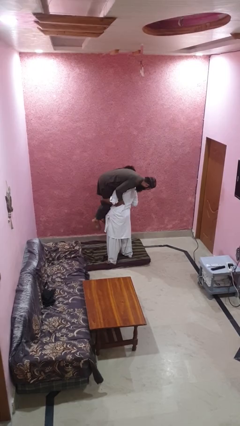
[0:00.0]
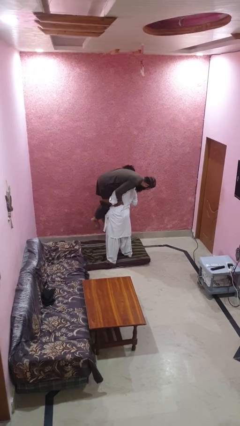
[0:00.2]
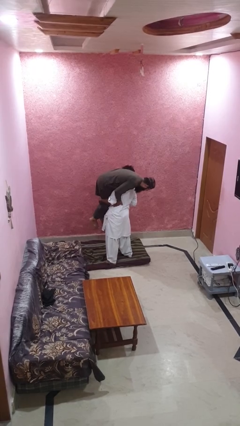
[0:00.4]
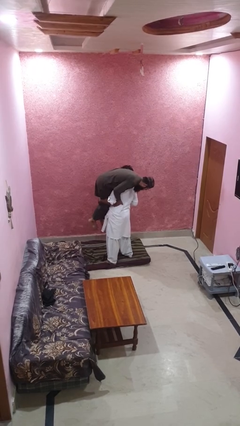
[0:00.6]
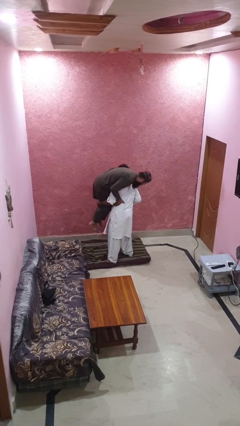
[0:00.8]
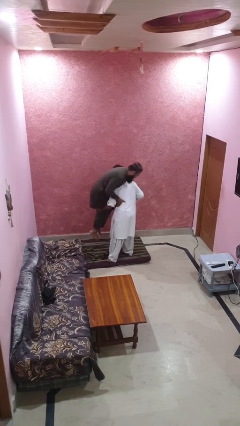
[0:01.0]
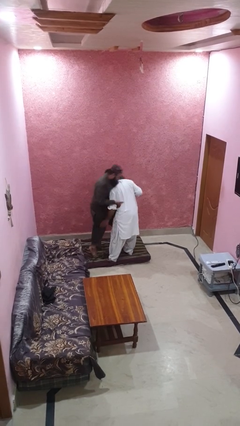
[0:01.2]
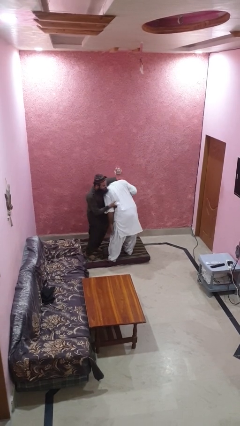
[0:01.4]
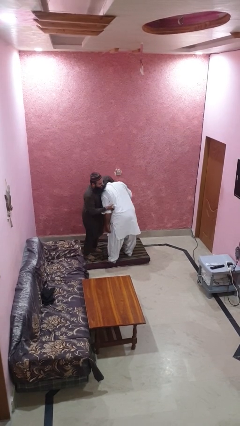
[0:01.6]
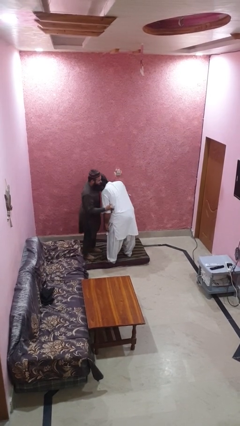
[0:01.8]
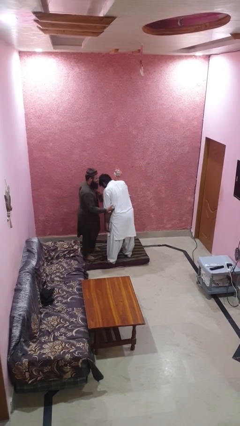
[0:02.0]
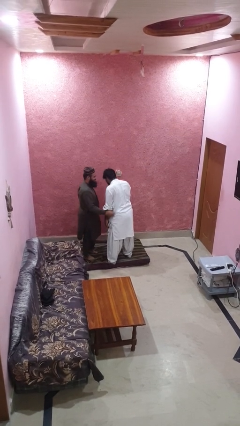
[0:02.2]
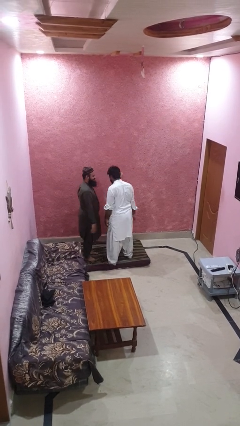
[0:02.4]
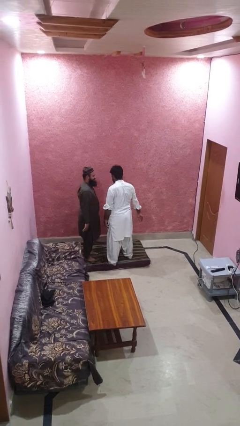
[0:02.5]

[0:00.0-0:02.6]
person puts down person

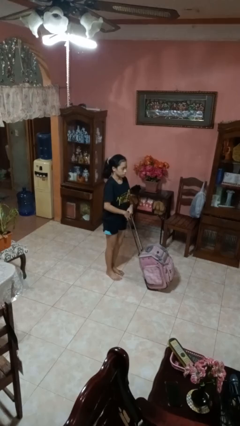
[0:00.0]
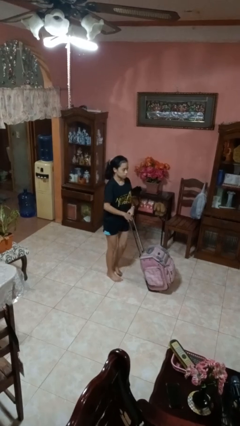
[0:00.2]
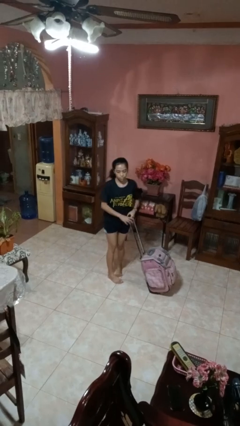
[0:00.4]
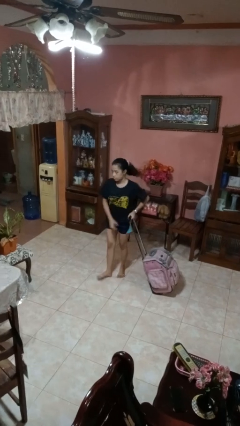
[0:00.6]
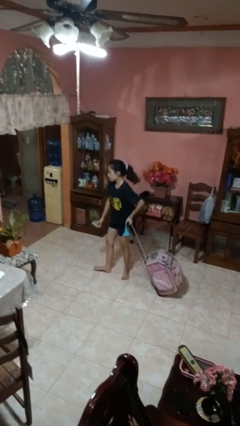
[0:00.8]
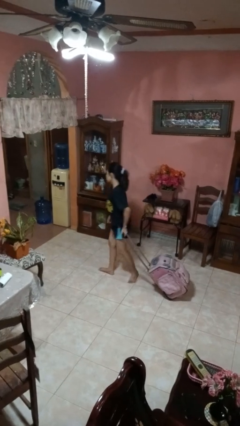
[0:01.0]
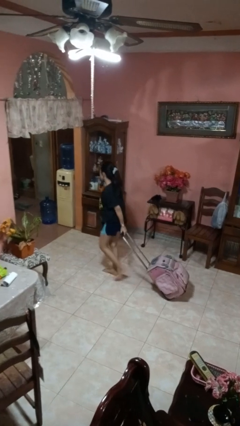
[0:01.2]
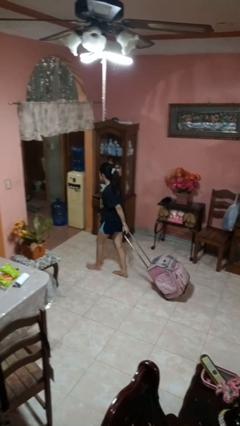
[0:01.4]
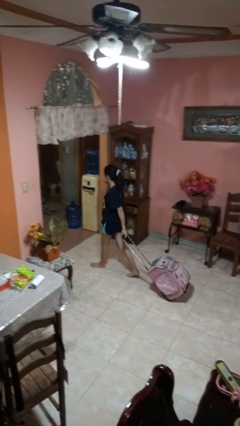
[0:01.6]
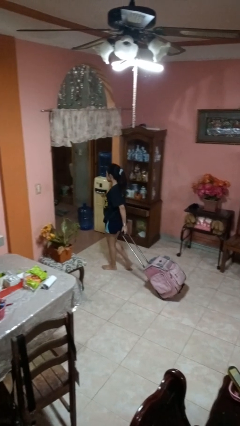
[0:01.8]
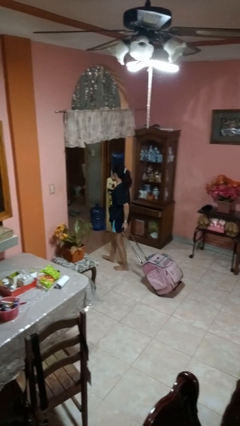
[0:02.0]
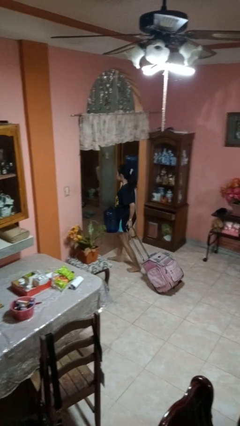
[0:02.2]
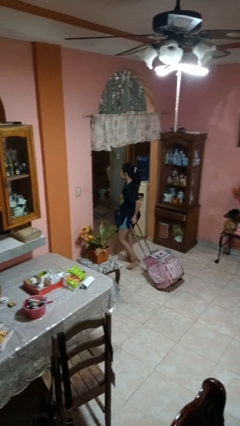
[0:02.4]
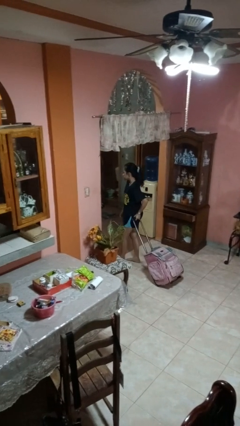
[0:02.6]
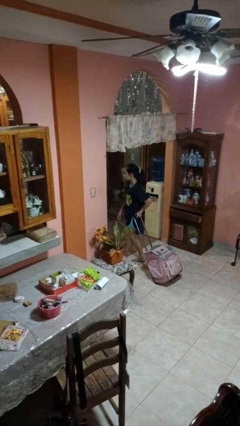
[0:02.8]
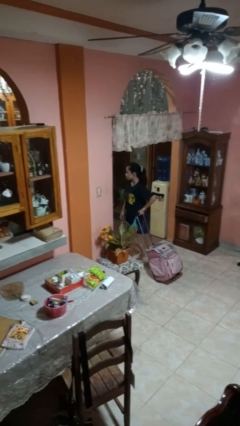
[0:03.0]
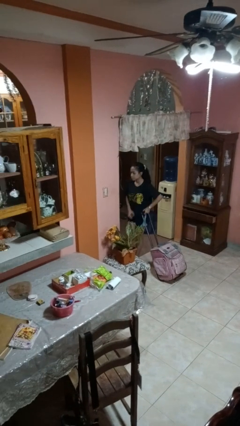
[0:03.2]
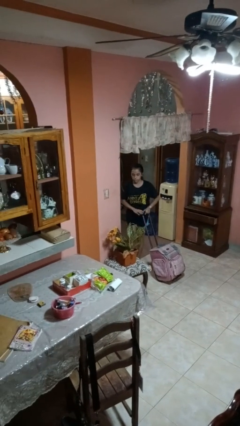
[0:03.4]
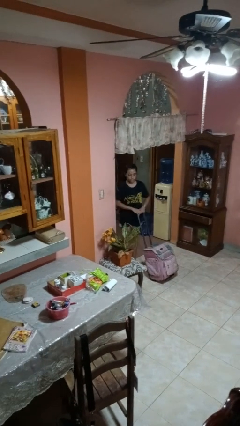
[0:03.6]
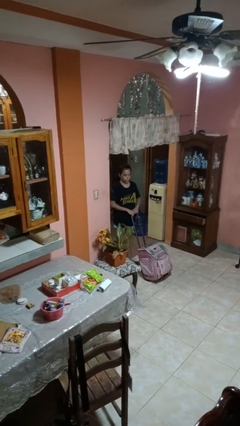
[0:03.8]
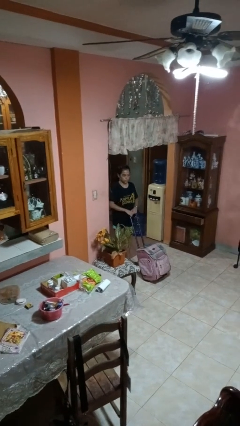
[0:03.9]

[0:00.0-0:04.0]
person pulls wheeled cart

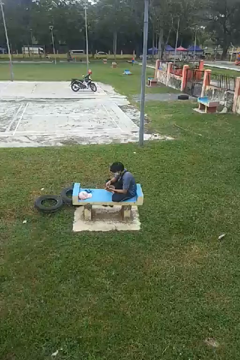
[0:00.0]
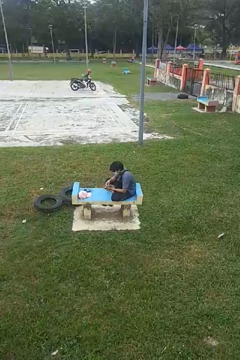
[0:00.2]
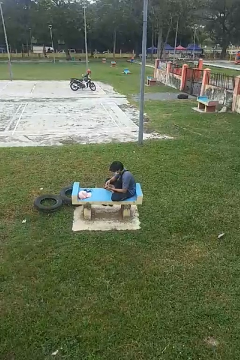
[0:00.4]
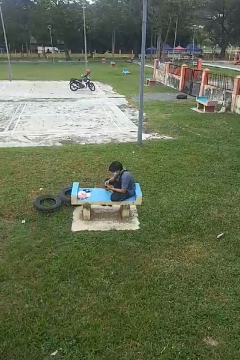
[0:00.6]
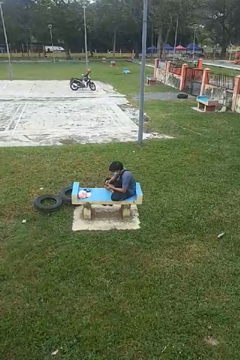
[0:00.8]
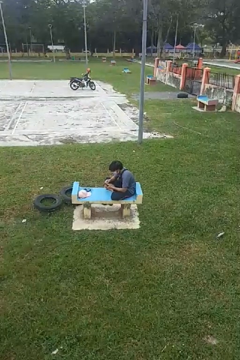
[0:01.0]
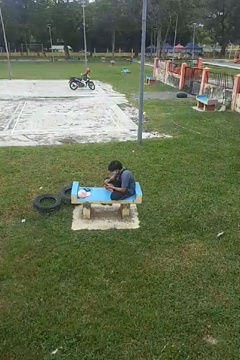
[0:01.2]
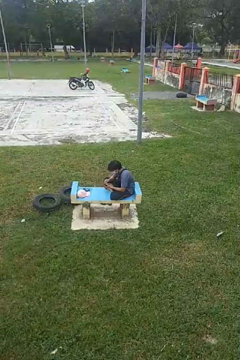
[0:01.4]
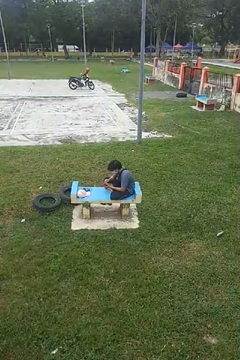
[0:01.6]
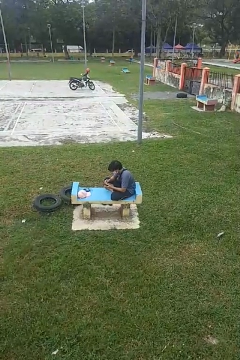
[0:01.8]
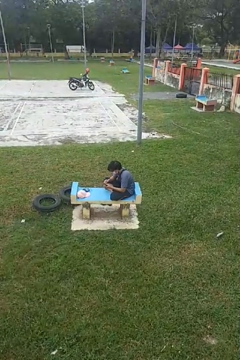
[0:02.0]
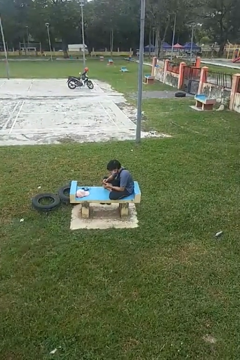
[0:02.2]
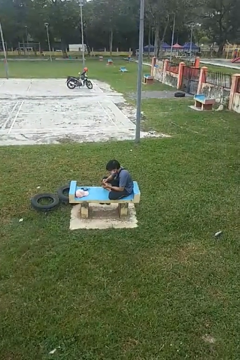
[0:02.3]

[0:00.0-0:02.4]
person searches in purse

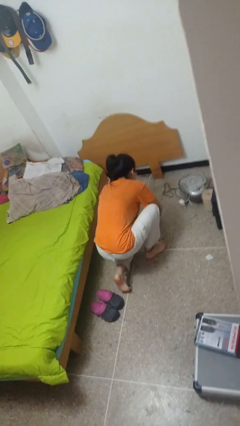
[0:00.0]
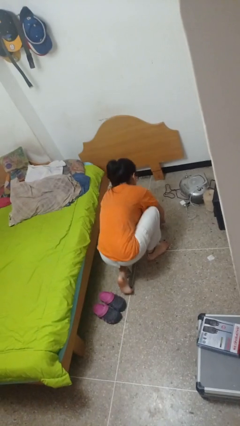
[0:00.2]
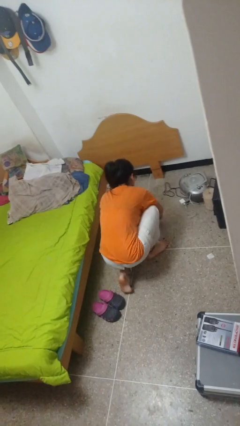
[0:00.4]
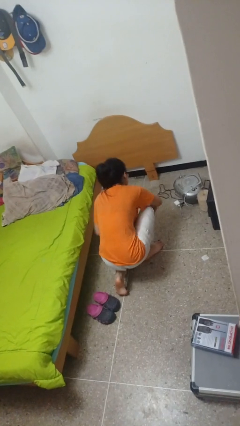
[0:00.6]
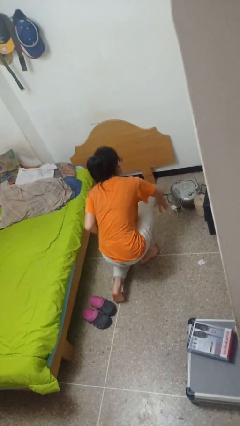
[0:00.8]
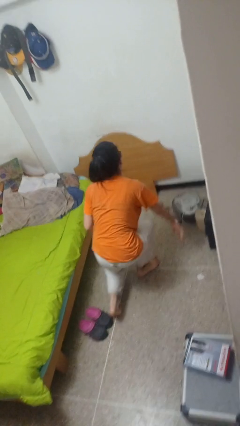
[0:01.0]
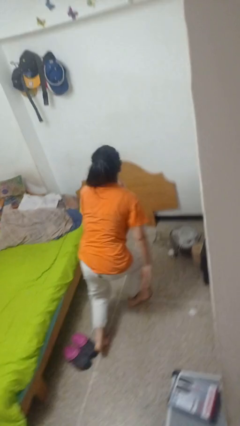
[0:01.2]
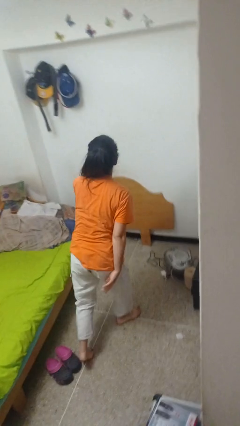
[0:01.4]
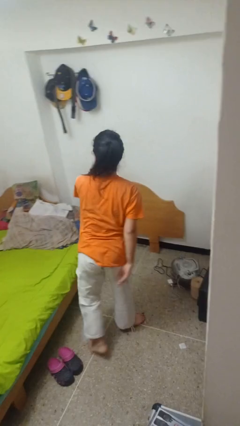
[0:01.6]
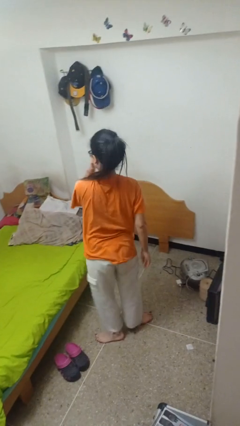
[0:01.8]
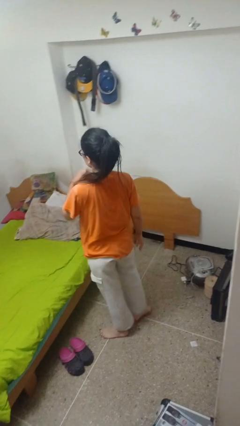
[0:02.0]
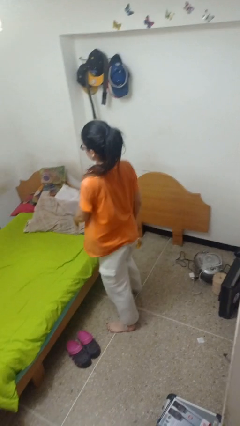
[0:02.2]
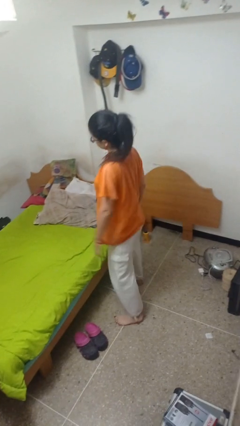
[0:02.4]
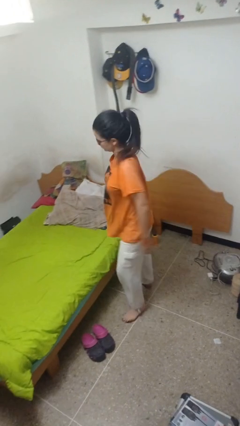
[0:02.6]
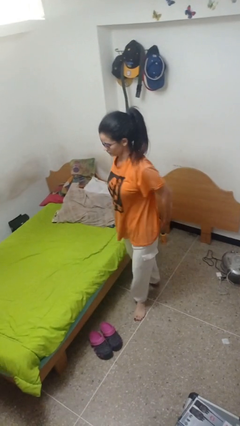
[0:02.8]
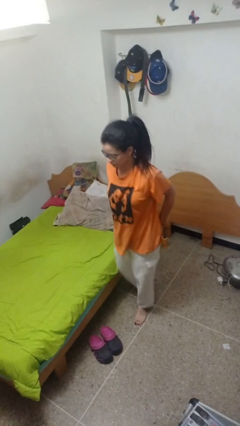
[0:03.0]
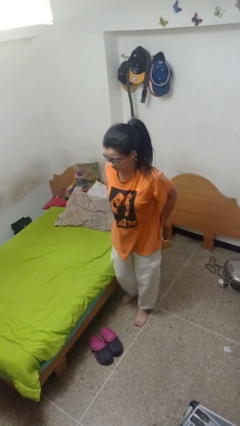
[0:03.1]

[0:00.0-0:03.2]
person stands up from floor

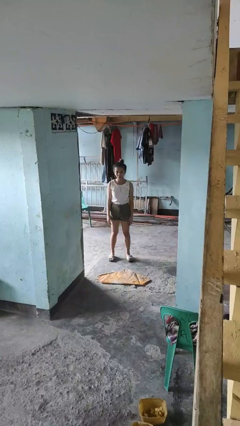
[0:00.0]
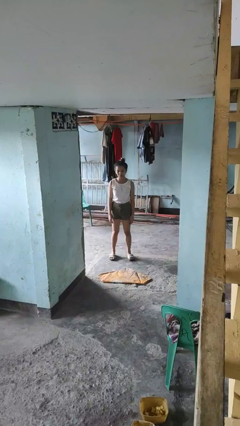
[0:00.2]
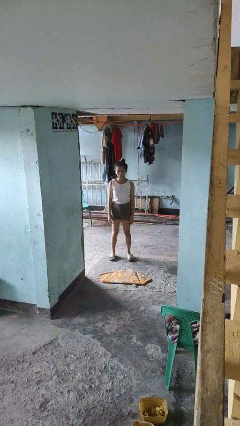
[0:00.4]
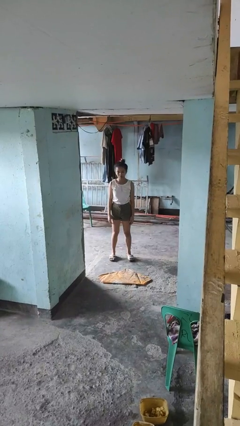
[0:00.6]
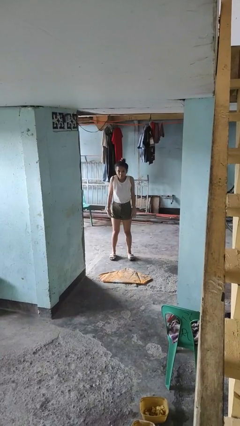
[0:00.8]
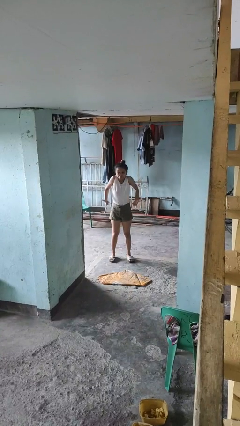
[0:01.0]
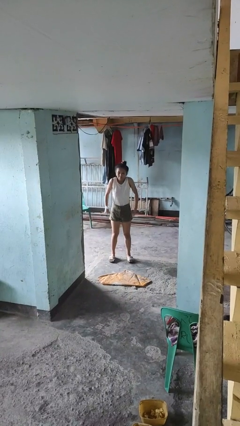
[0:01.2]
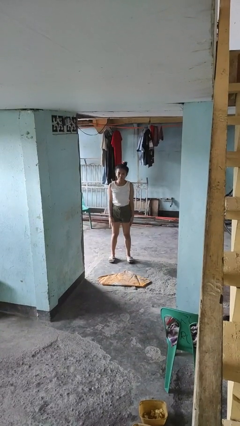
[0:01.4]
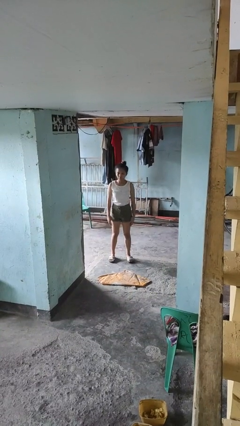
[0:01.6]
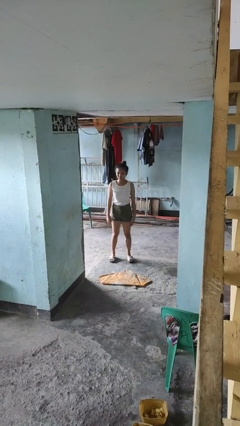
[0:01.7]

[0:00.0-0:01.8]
person shrugs

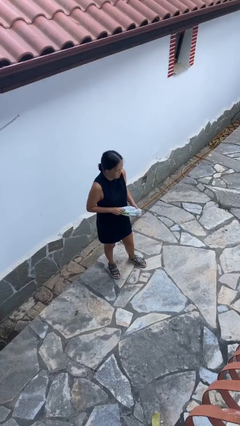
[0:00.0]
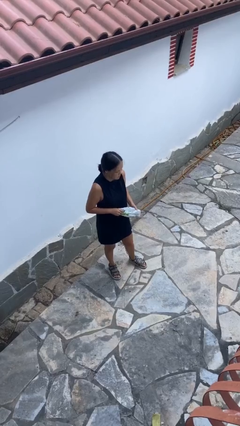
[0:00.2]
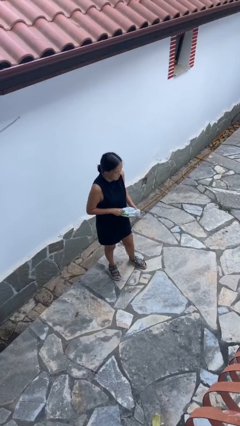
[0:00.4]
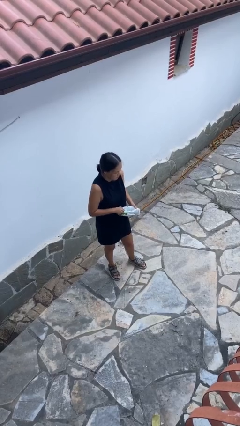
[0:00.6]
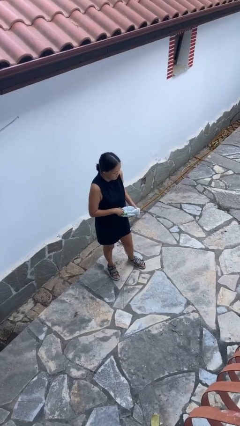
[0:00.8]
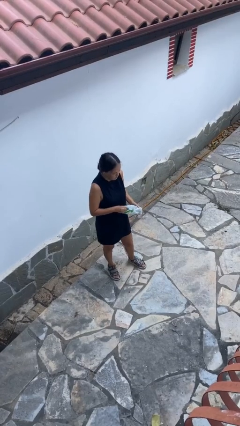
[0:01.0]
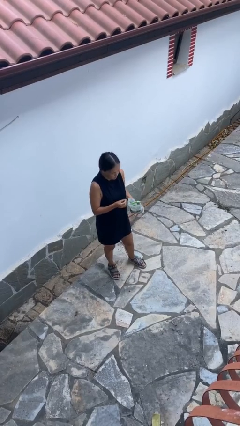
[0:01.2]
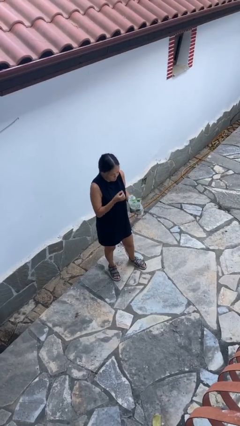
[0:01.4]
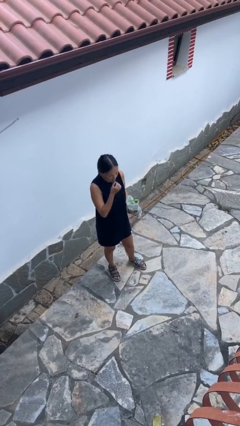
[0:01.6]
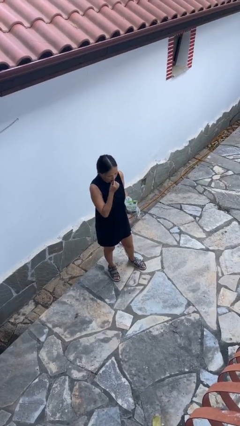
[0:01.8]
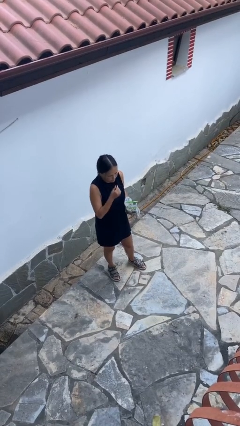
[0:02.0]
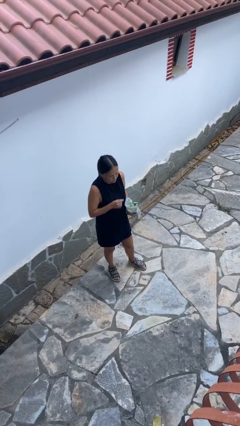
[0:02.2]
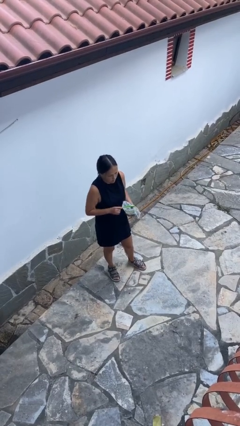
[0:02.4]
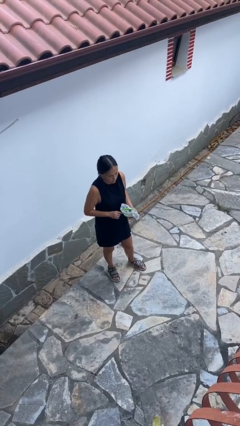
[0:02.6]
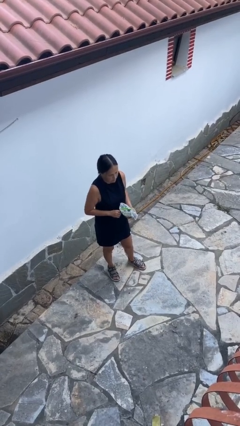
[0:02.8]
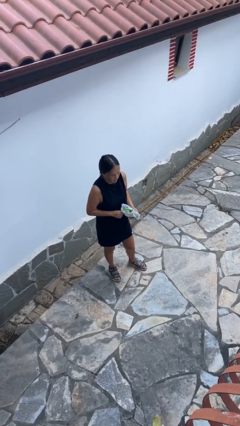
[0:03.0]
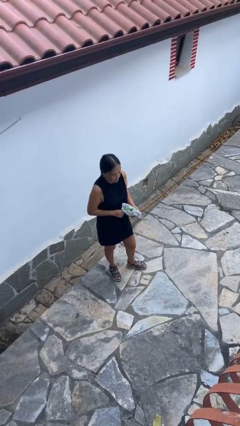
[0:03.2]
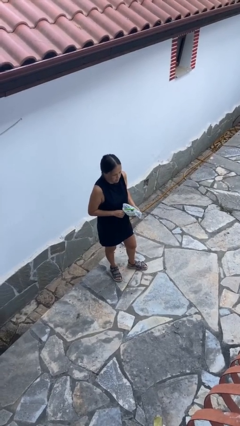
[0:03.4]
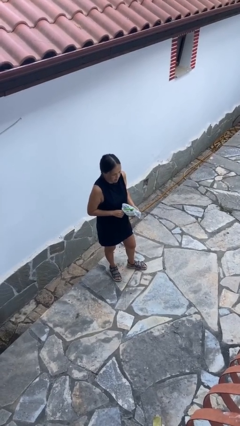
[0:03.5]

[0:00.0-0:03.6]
person eats snack from bag
